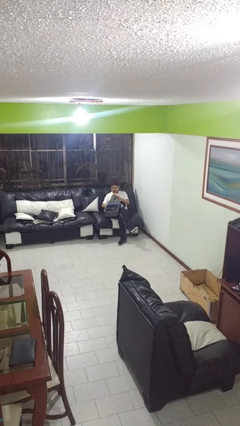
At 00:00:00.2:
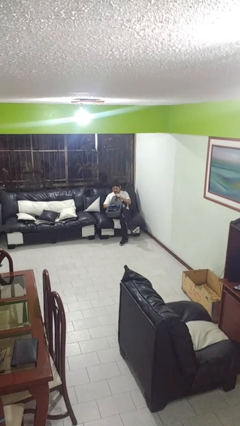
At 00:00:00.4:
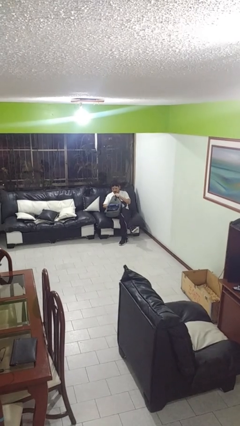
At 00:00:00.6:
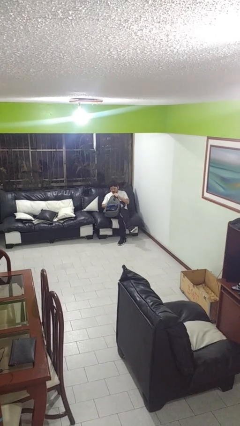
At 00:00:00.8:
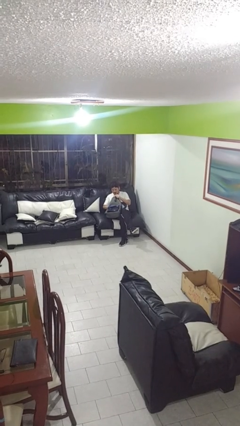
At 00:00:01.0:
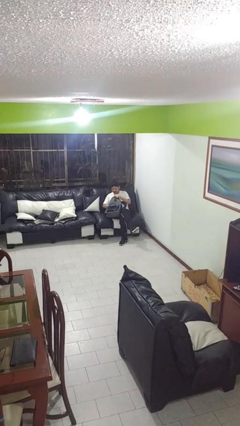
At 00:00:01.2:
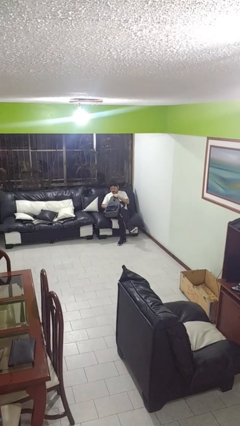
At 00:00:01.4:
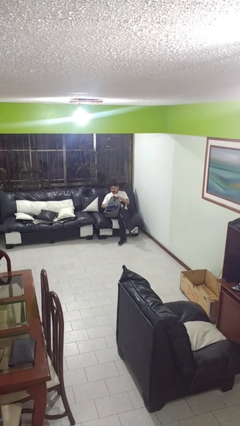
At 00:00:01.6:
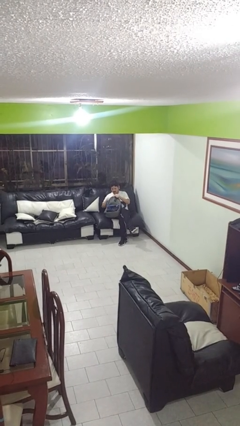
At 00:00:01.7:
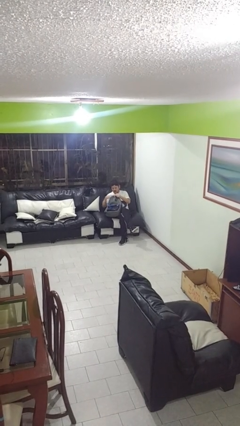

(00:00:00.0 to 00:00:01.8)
person searches in backpack

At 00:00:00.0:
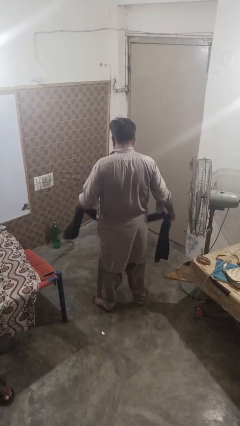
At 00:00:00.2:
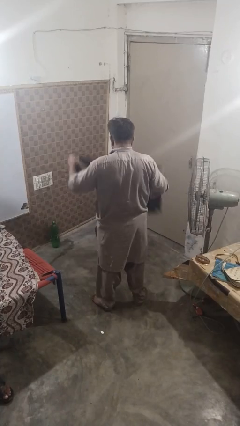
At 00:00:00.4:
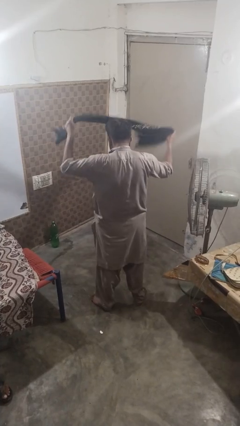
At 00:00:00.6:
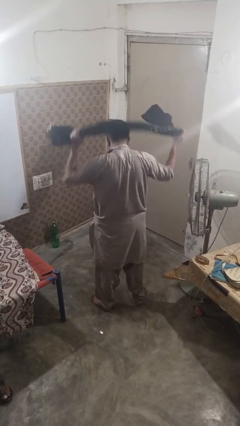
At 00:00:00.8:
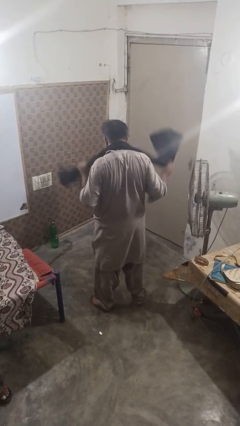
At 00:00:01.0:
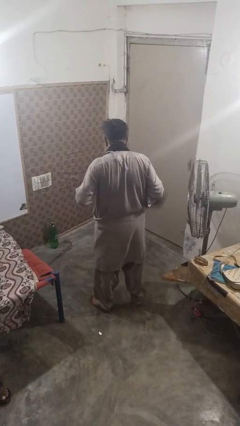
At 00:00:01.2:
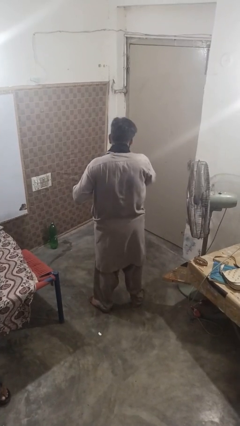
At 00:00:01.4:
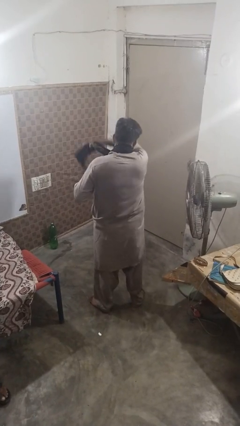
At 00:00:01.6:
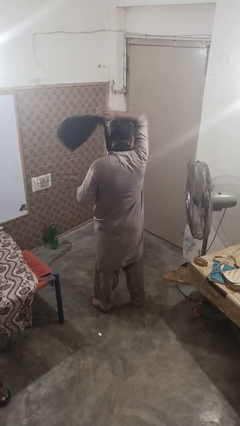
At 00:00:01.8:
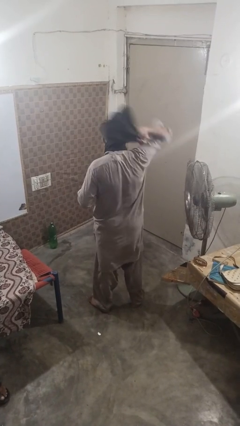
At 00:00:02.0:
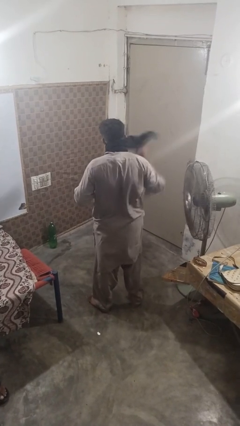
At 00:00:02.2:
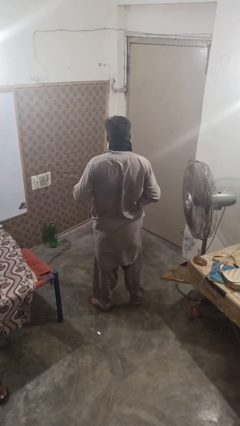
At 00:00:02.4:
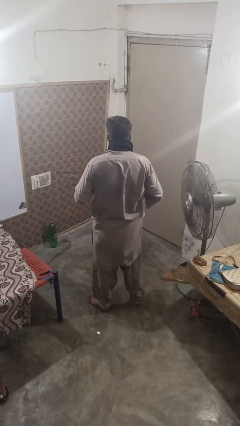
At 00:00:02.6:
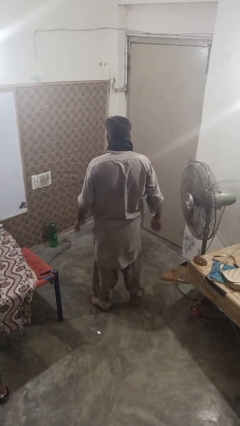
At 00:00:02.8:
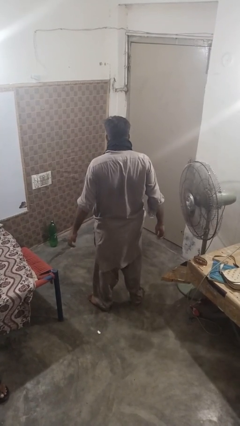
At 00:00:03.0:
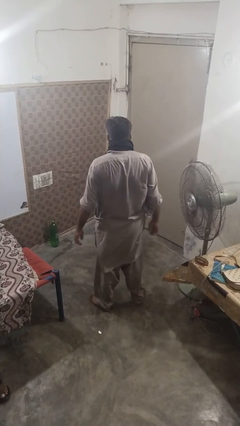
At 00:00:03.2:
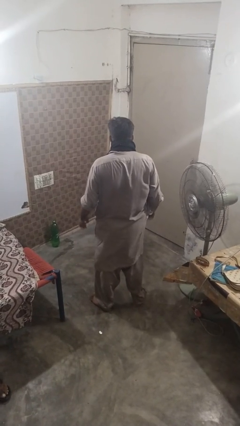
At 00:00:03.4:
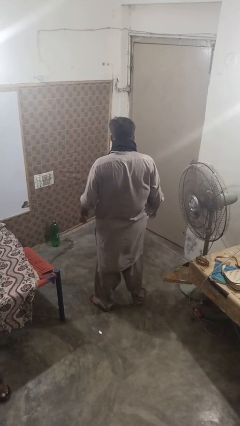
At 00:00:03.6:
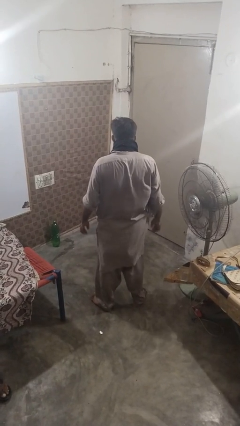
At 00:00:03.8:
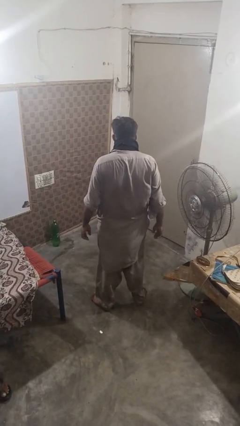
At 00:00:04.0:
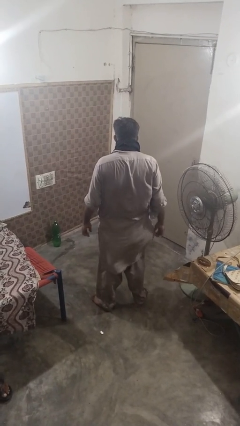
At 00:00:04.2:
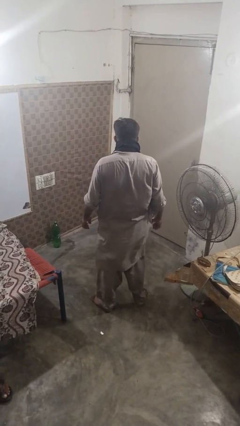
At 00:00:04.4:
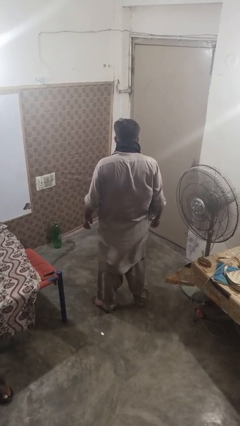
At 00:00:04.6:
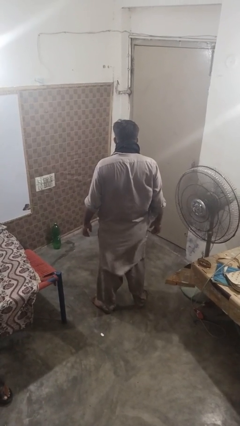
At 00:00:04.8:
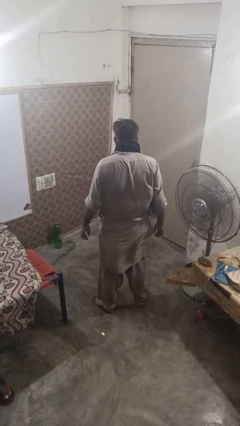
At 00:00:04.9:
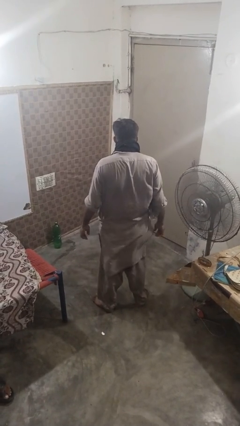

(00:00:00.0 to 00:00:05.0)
person puts on scarf

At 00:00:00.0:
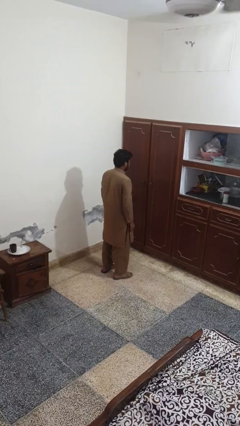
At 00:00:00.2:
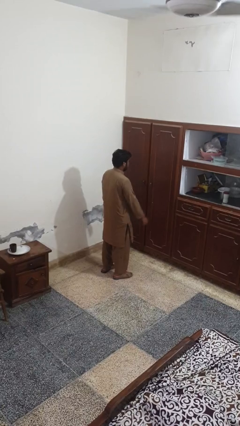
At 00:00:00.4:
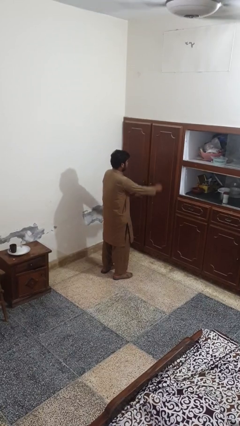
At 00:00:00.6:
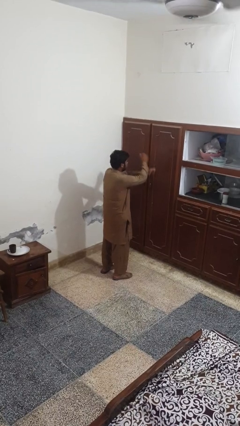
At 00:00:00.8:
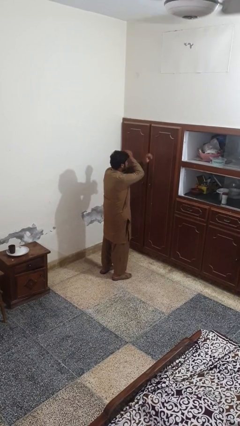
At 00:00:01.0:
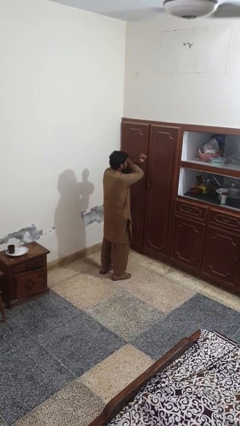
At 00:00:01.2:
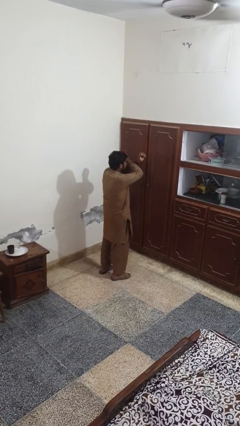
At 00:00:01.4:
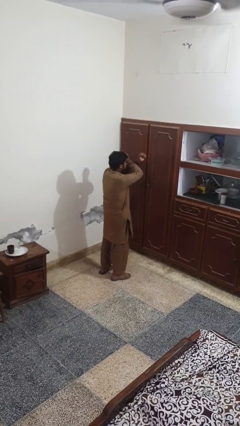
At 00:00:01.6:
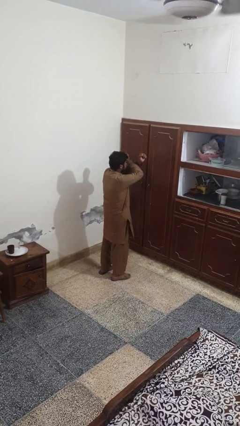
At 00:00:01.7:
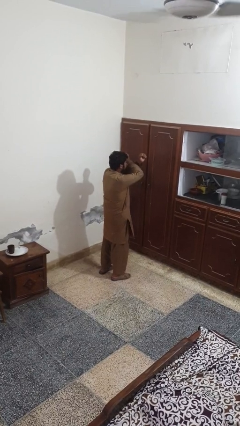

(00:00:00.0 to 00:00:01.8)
person gestures arms x

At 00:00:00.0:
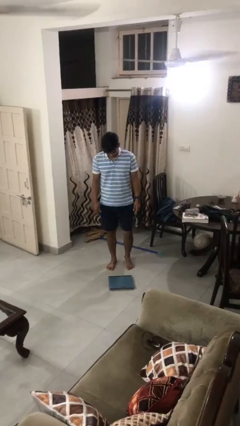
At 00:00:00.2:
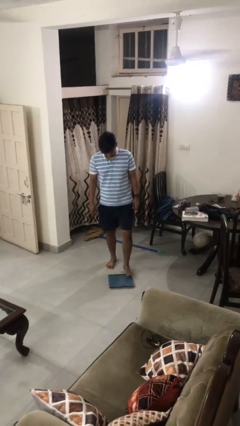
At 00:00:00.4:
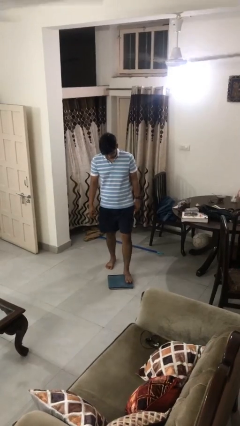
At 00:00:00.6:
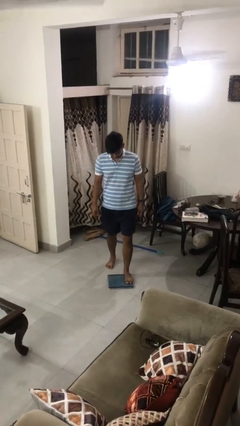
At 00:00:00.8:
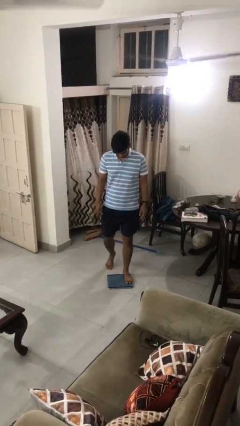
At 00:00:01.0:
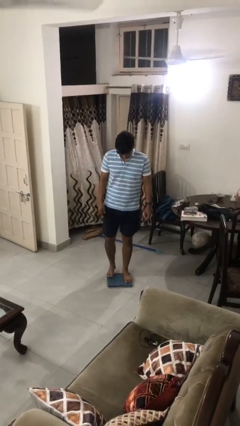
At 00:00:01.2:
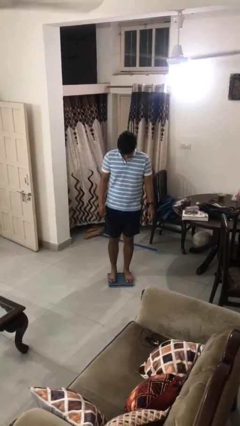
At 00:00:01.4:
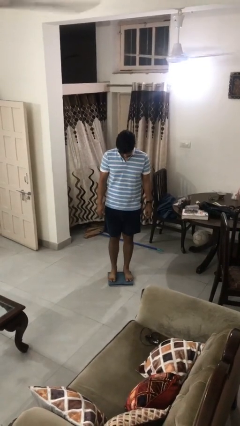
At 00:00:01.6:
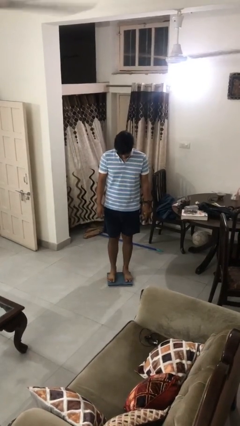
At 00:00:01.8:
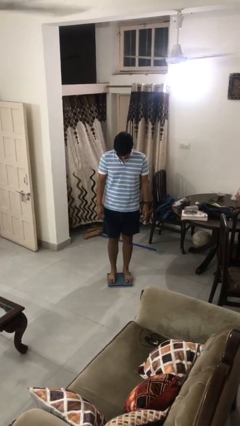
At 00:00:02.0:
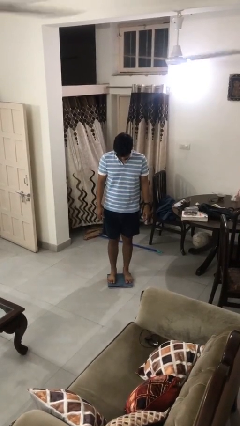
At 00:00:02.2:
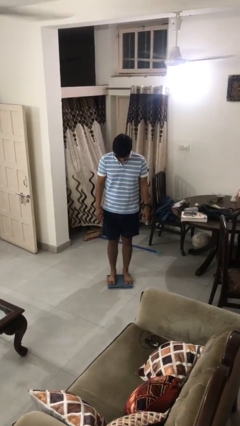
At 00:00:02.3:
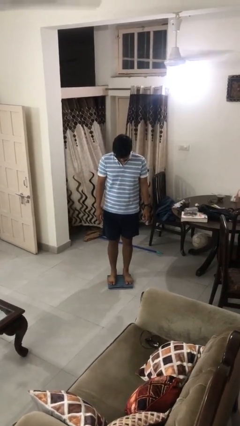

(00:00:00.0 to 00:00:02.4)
person uses bodyweight scale

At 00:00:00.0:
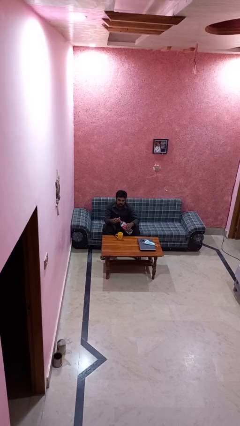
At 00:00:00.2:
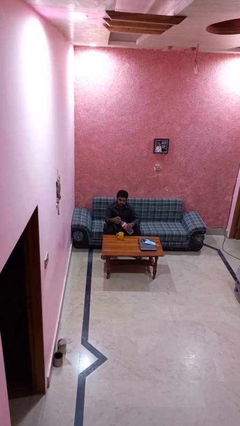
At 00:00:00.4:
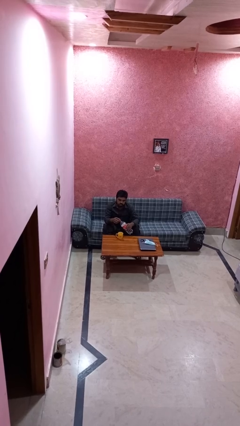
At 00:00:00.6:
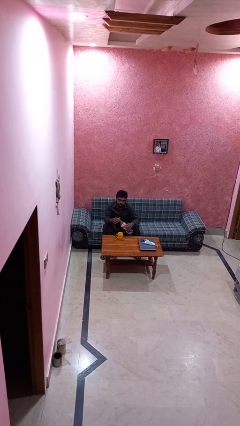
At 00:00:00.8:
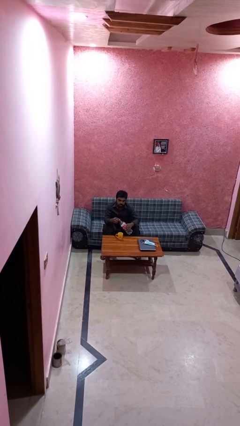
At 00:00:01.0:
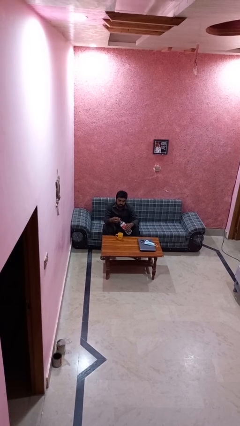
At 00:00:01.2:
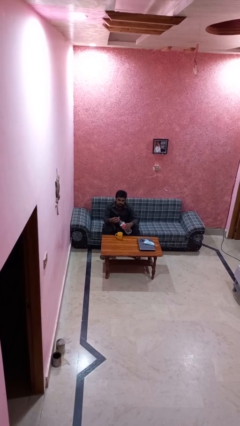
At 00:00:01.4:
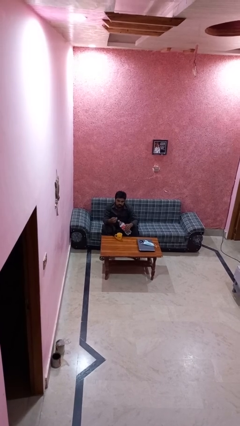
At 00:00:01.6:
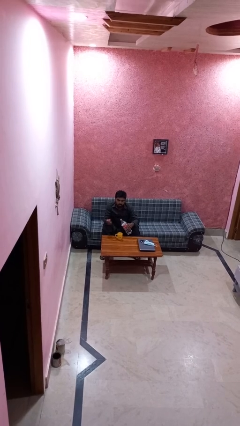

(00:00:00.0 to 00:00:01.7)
person unscrews lid from bottle

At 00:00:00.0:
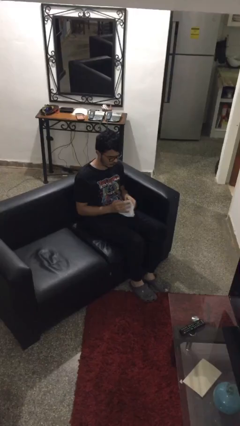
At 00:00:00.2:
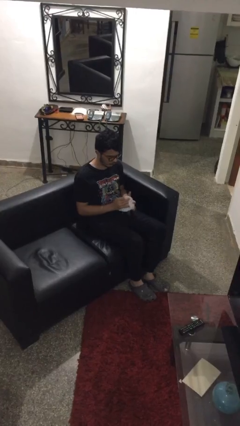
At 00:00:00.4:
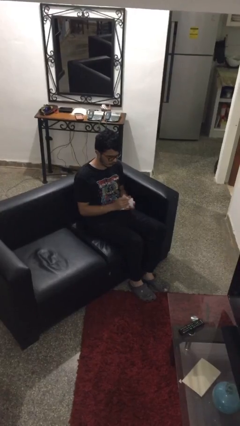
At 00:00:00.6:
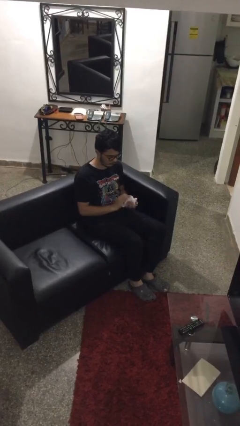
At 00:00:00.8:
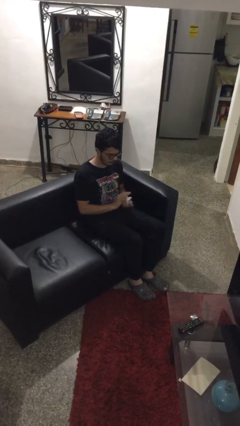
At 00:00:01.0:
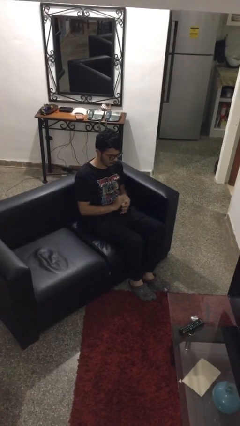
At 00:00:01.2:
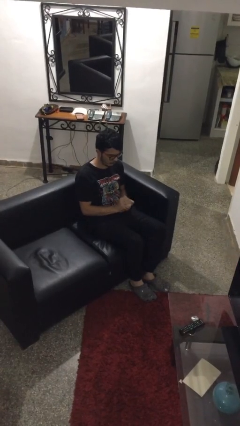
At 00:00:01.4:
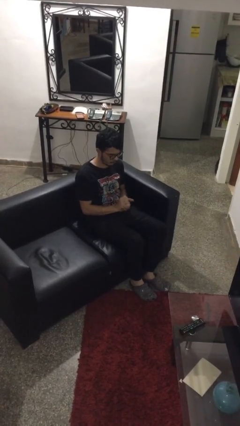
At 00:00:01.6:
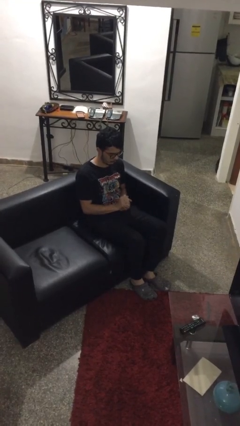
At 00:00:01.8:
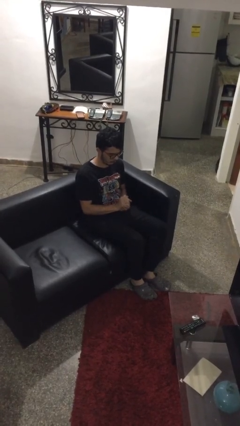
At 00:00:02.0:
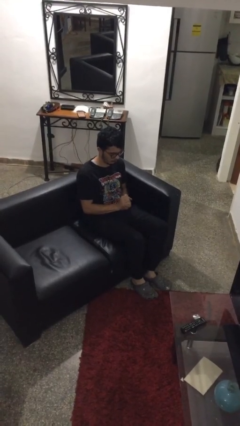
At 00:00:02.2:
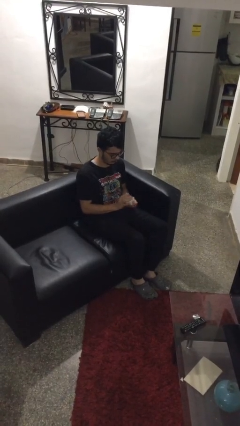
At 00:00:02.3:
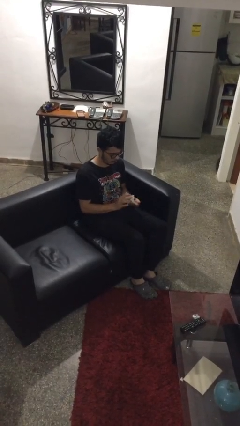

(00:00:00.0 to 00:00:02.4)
person crumples paper

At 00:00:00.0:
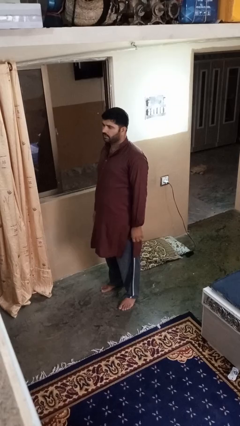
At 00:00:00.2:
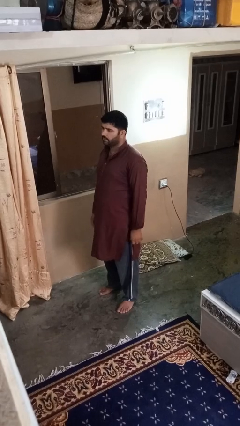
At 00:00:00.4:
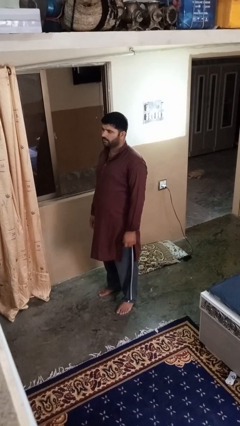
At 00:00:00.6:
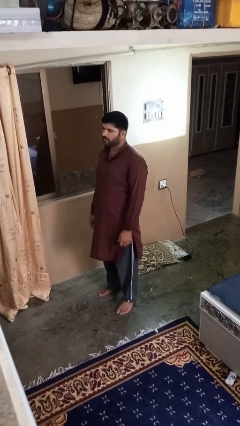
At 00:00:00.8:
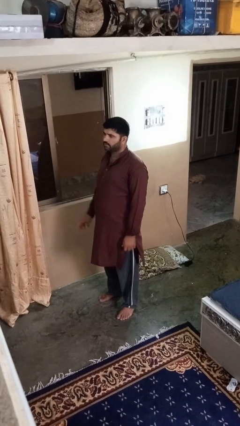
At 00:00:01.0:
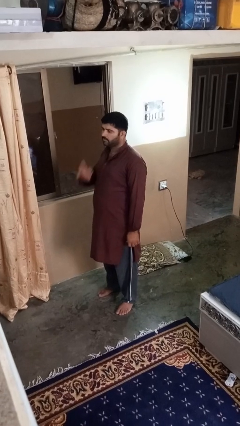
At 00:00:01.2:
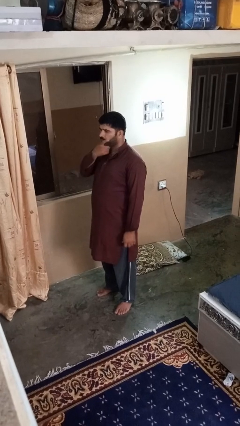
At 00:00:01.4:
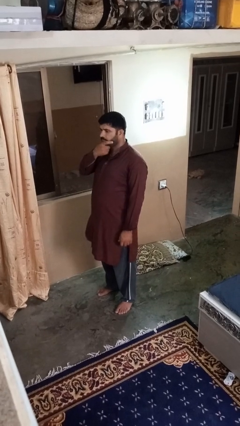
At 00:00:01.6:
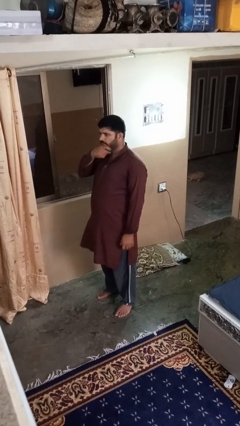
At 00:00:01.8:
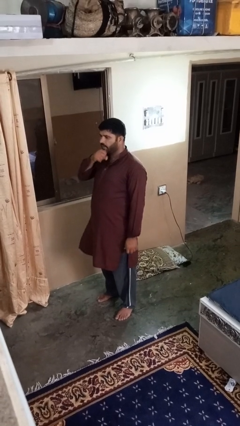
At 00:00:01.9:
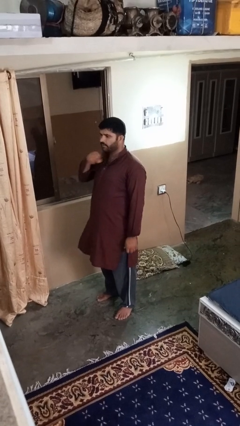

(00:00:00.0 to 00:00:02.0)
person strokes chin
